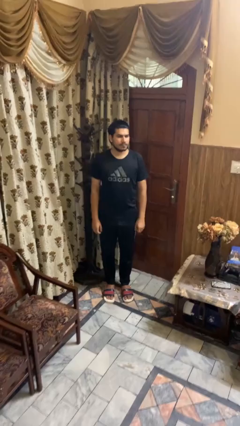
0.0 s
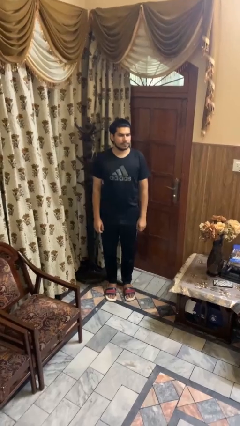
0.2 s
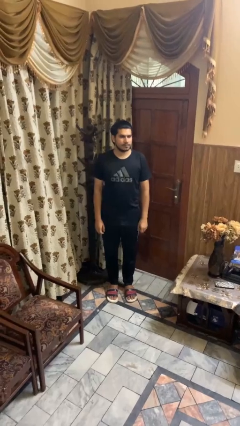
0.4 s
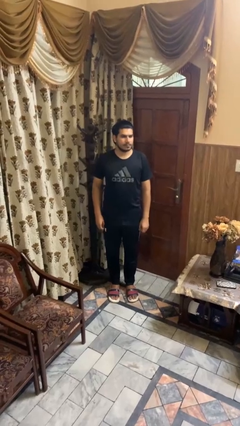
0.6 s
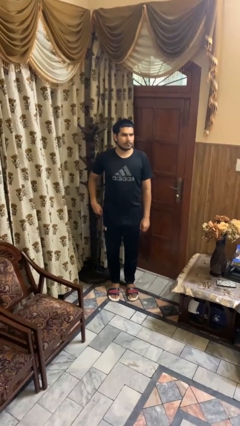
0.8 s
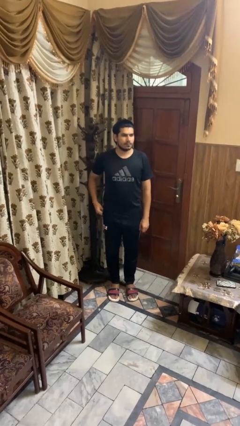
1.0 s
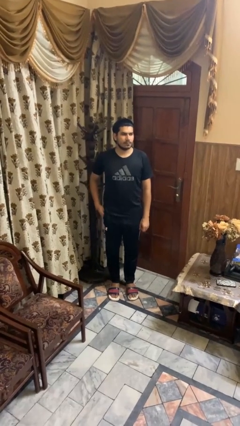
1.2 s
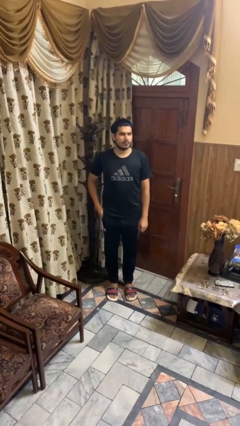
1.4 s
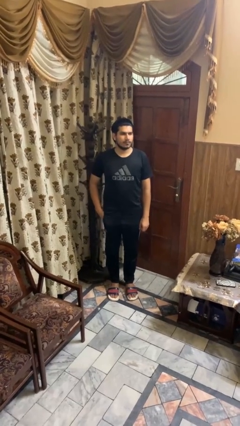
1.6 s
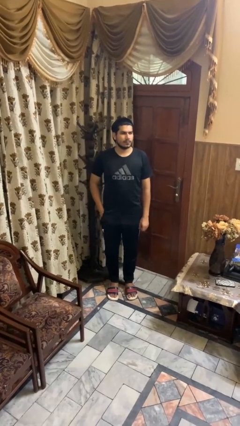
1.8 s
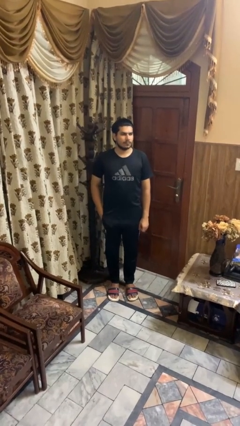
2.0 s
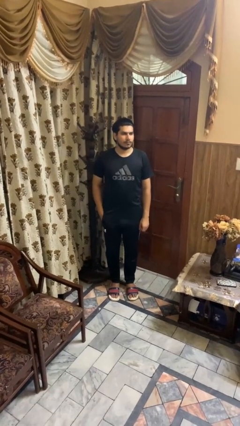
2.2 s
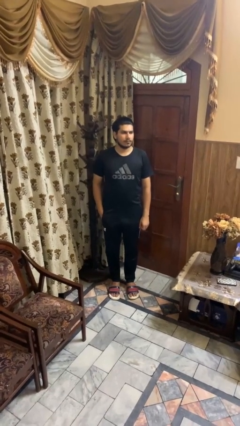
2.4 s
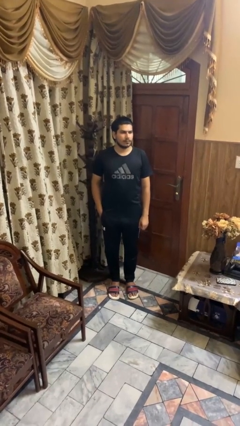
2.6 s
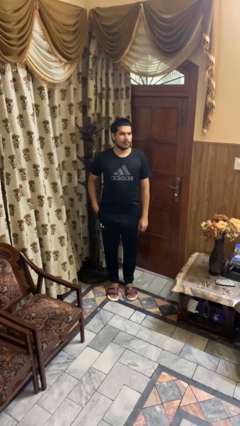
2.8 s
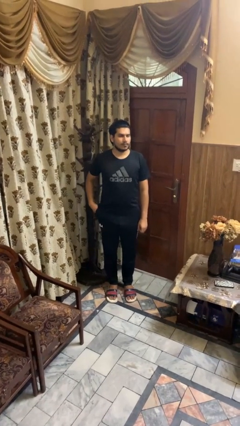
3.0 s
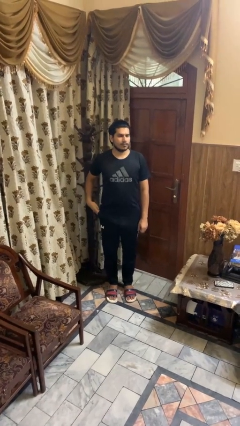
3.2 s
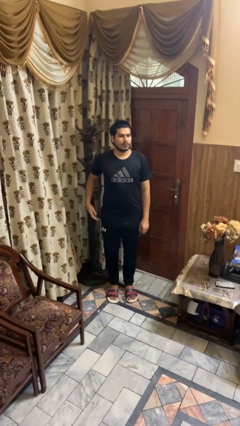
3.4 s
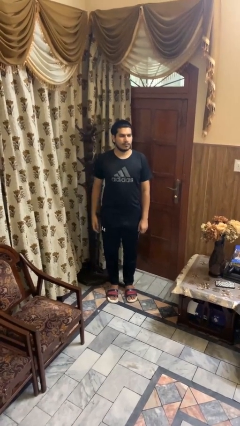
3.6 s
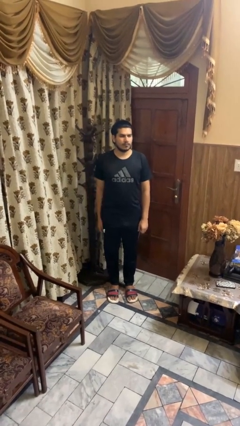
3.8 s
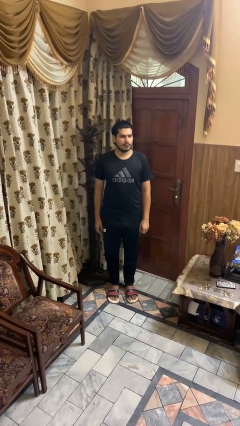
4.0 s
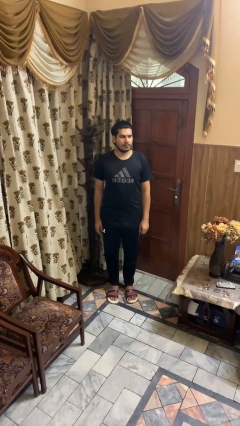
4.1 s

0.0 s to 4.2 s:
person puts hands in back pockets

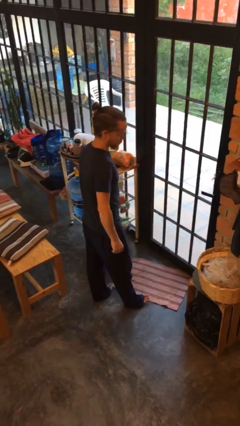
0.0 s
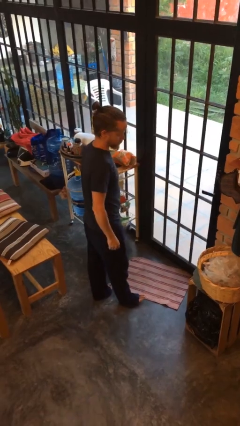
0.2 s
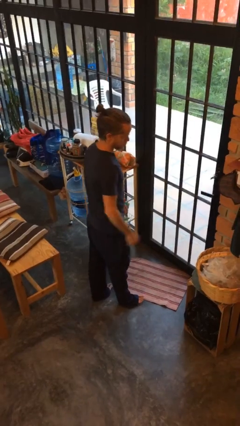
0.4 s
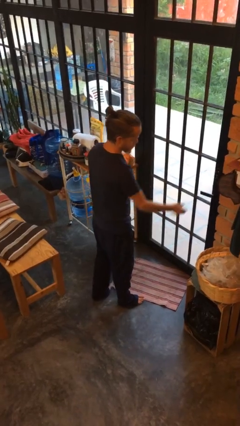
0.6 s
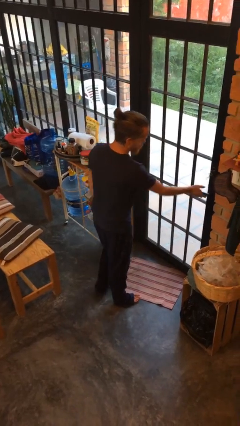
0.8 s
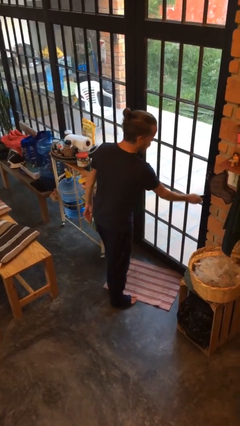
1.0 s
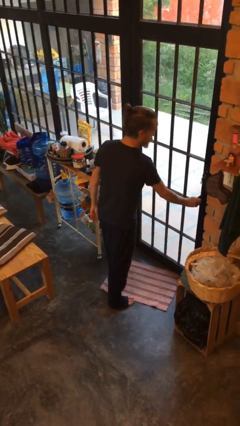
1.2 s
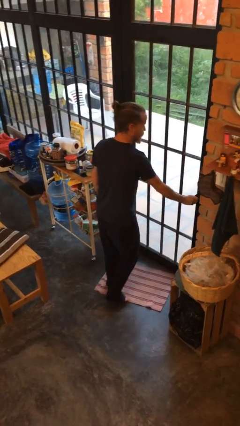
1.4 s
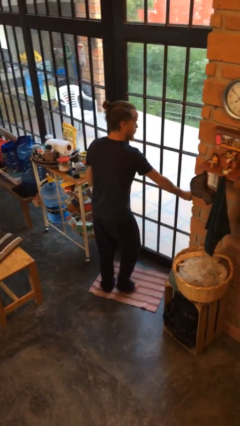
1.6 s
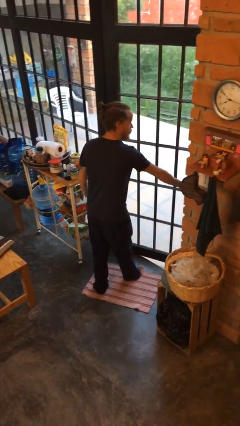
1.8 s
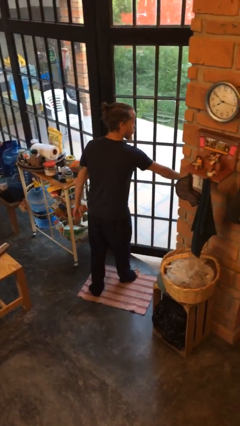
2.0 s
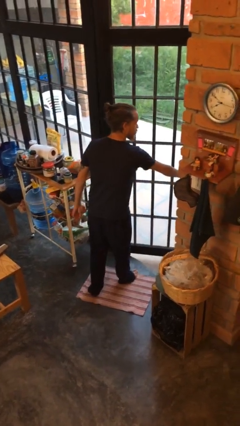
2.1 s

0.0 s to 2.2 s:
person opens facility door

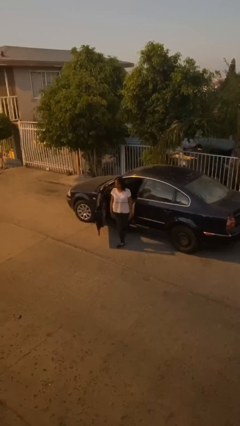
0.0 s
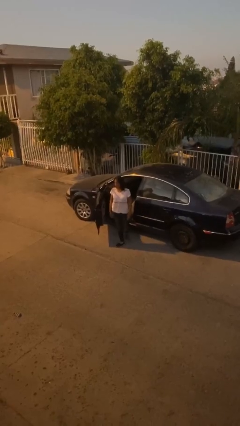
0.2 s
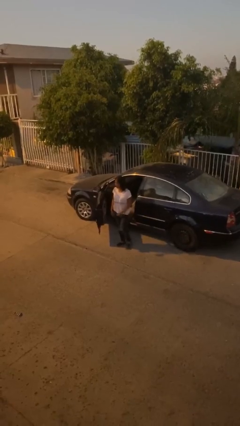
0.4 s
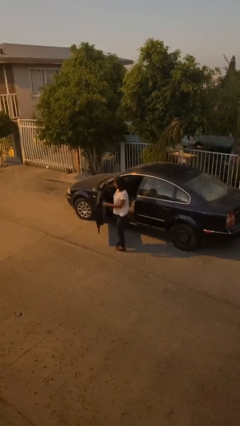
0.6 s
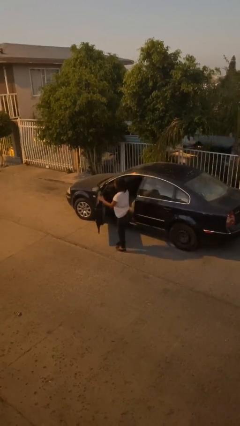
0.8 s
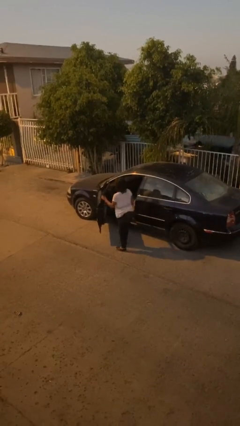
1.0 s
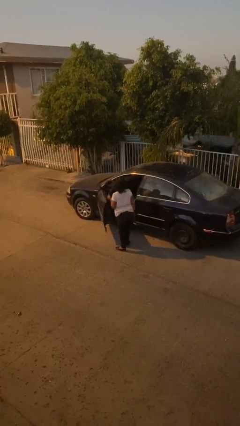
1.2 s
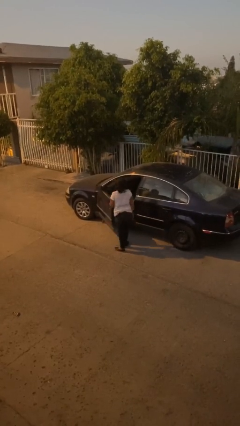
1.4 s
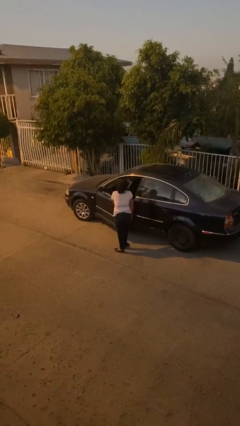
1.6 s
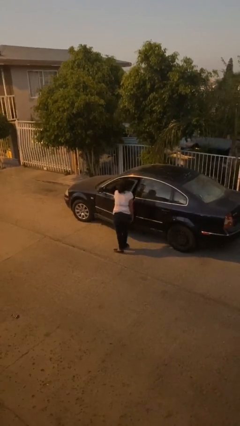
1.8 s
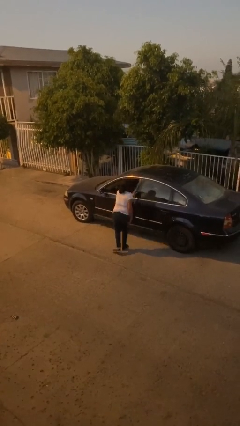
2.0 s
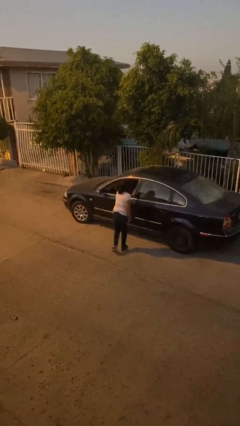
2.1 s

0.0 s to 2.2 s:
person closes car door

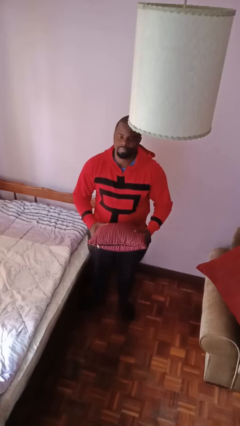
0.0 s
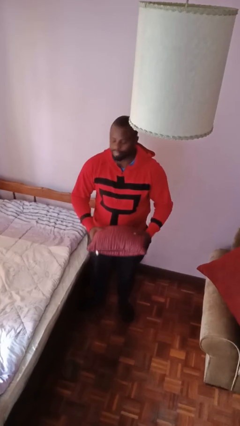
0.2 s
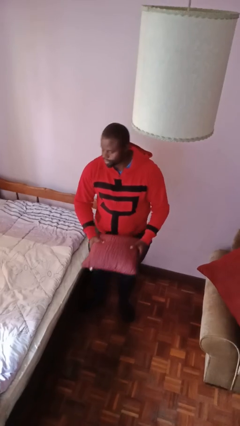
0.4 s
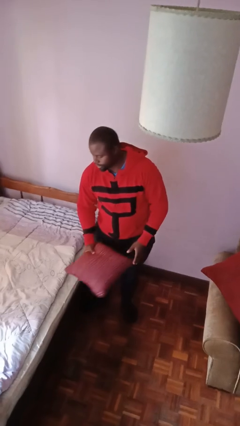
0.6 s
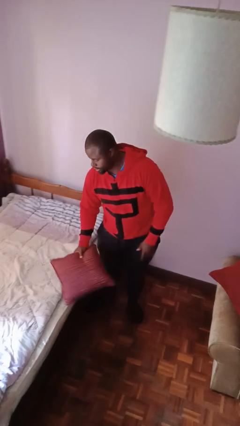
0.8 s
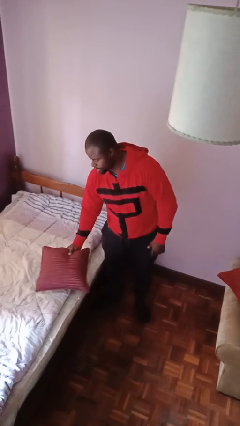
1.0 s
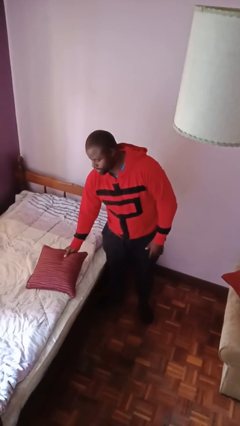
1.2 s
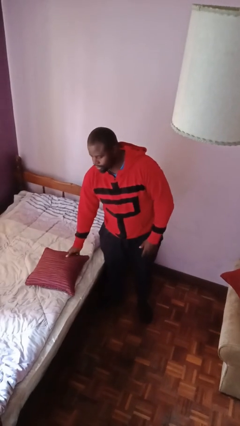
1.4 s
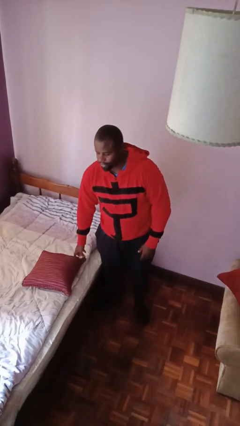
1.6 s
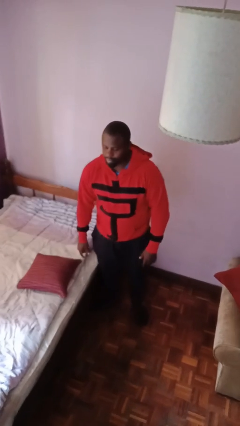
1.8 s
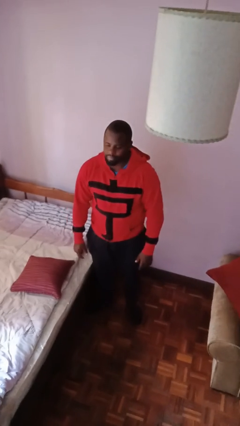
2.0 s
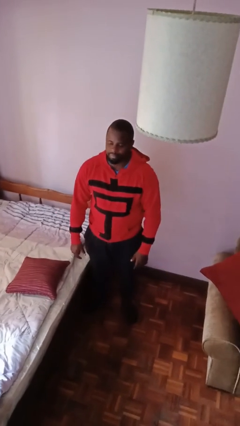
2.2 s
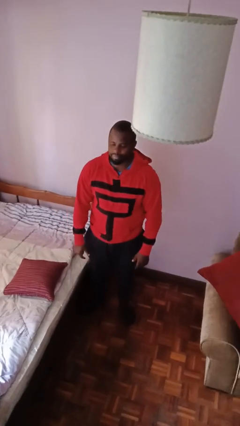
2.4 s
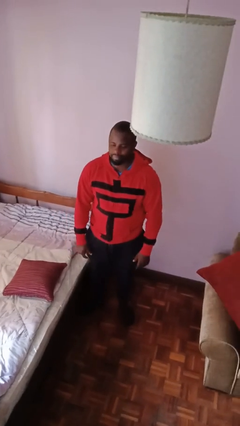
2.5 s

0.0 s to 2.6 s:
person puts down object on bed

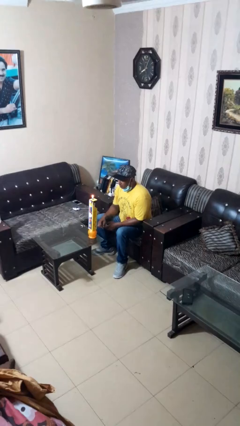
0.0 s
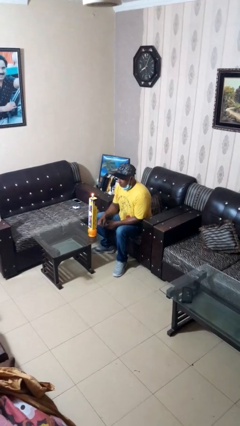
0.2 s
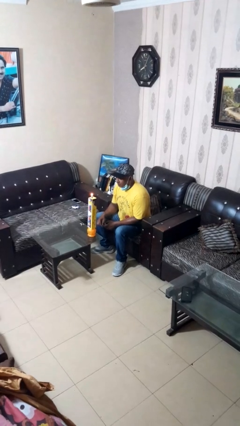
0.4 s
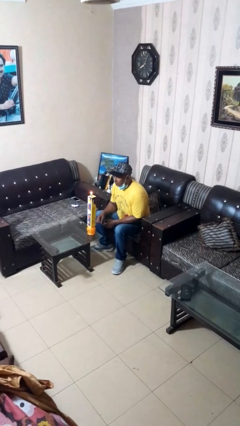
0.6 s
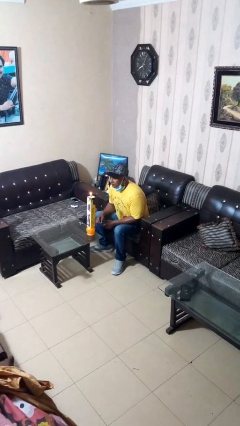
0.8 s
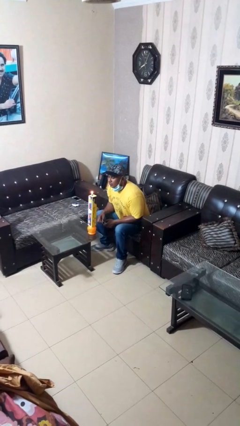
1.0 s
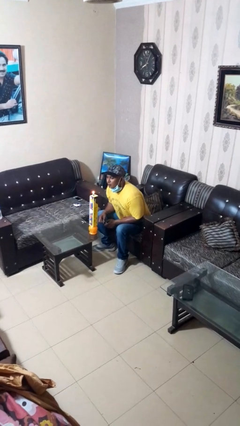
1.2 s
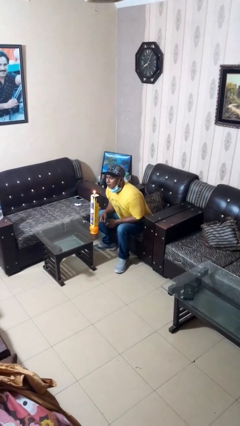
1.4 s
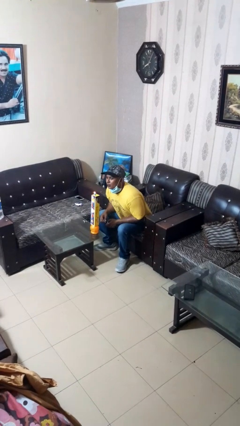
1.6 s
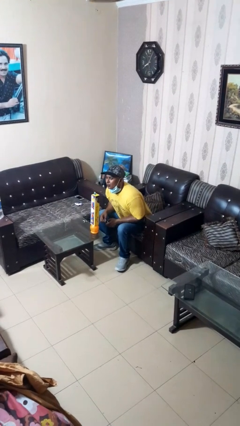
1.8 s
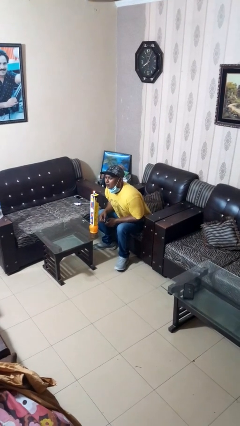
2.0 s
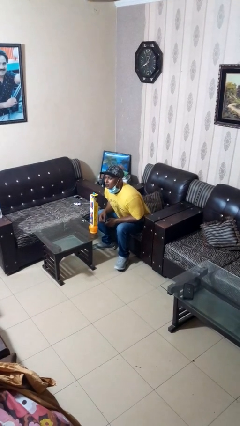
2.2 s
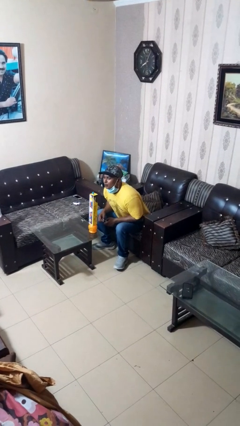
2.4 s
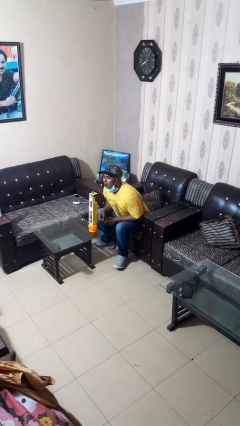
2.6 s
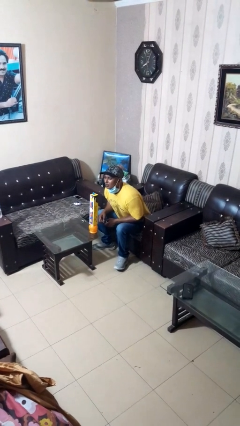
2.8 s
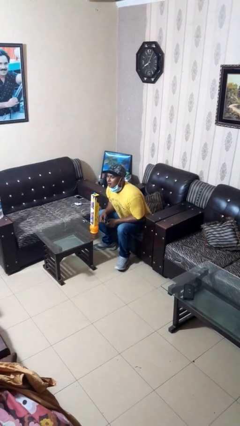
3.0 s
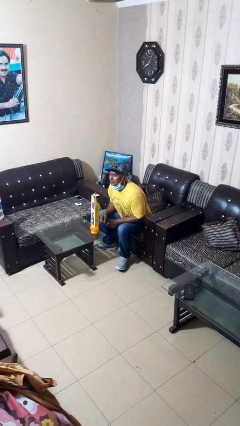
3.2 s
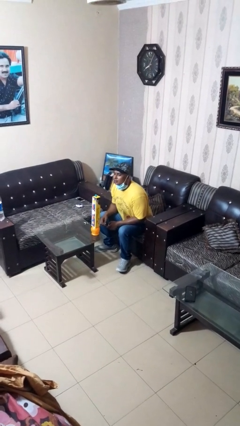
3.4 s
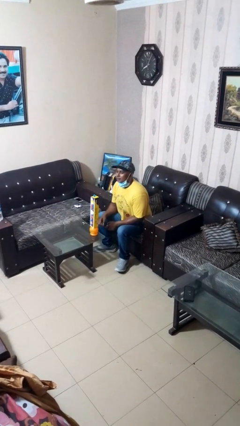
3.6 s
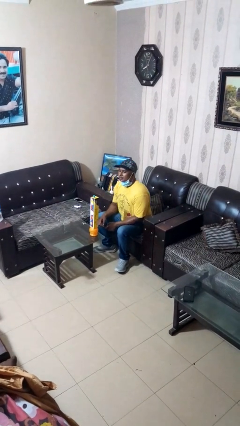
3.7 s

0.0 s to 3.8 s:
person extinguishes candle

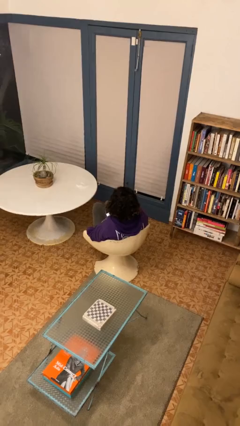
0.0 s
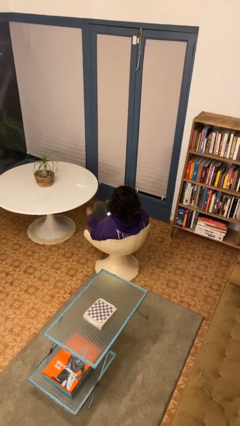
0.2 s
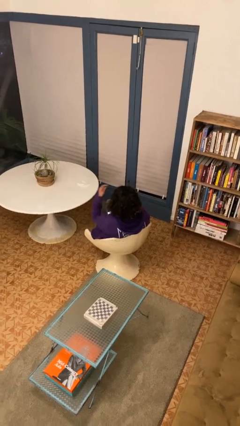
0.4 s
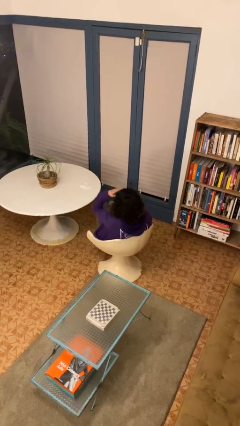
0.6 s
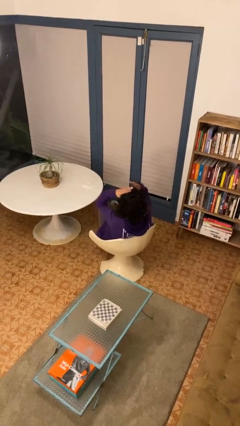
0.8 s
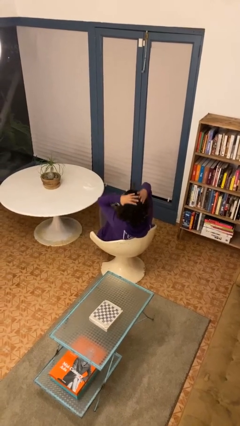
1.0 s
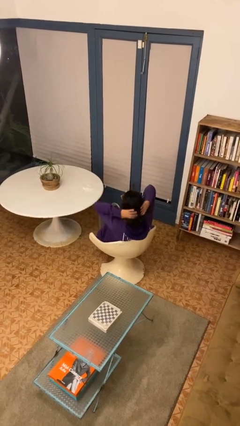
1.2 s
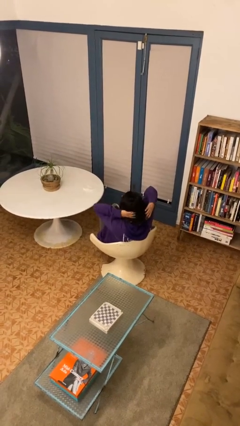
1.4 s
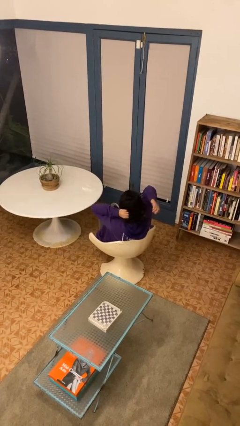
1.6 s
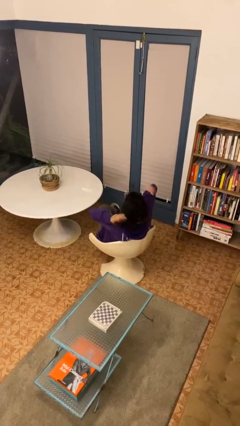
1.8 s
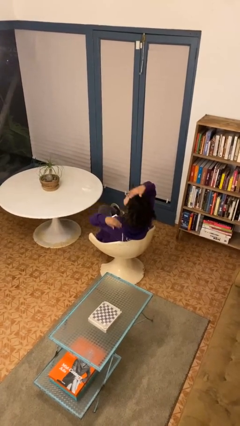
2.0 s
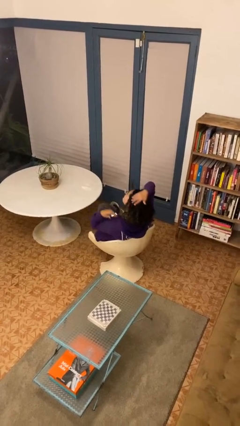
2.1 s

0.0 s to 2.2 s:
person strokes hair

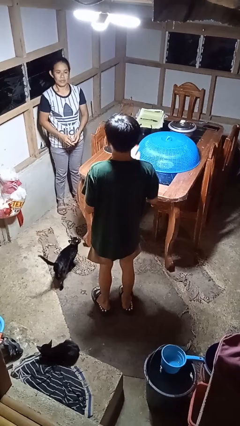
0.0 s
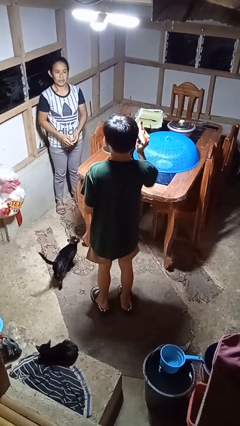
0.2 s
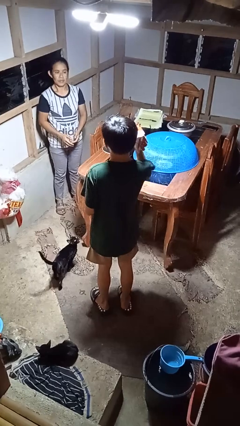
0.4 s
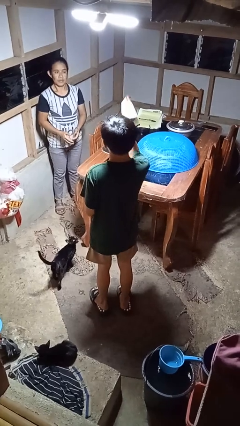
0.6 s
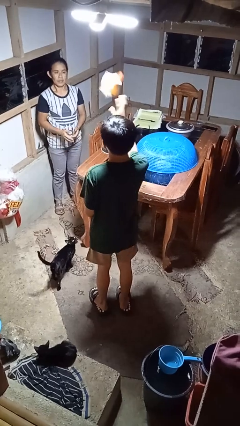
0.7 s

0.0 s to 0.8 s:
person throws object to person
